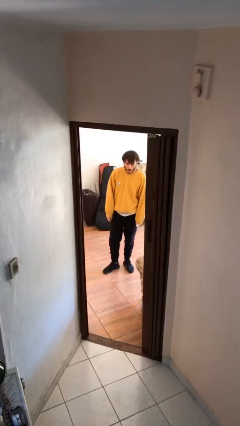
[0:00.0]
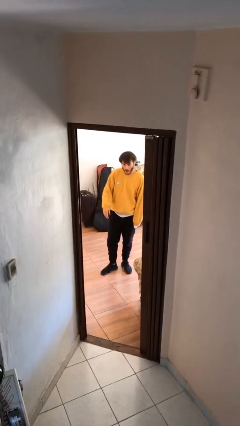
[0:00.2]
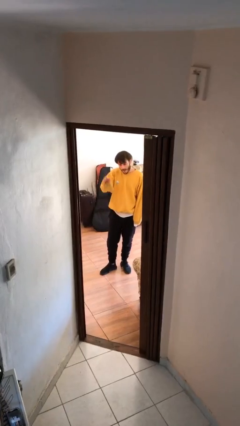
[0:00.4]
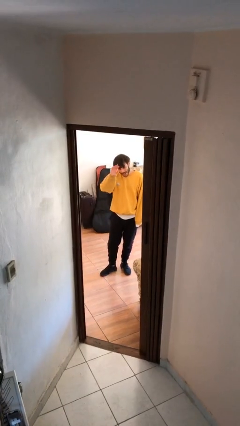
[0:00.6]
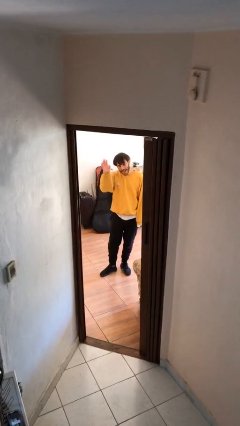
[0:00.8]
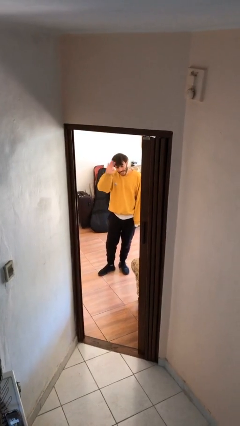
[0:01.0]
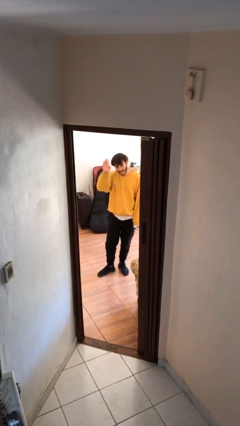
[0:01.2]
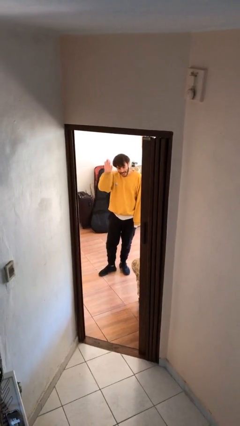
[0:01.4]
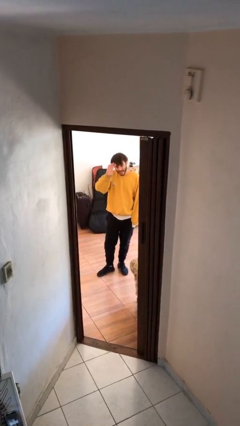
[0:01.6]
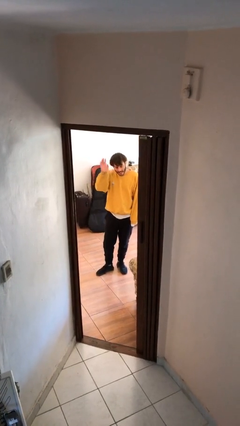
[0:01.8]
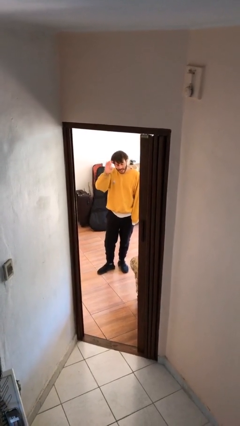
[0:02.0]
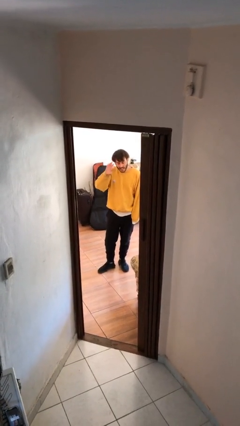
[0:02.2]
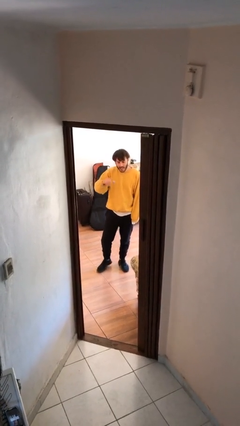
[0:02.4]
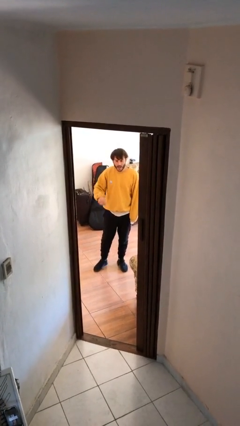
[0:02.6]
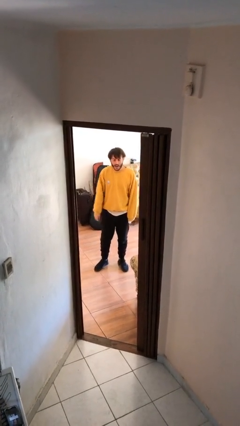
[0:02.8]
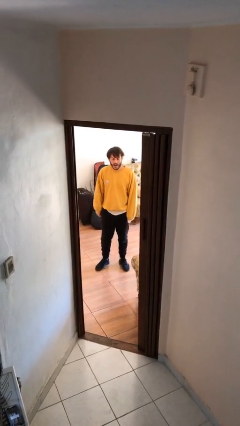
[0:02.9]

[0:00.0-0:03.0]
person waves at person

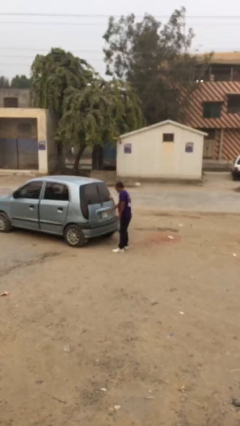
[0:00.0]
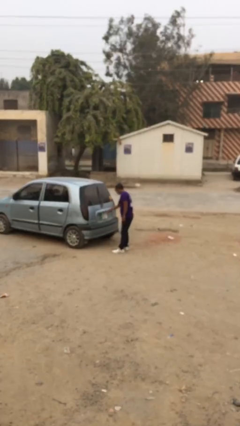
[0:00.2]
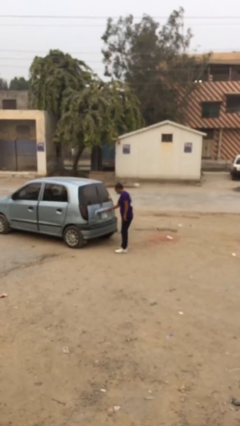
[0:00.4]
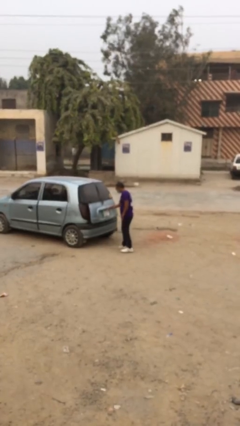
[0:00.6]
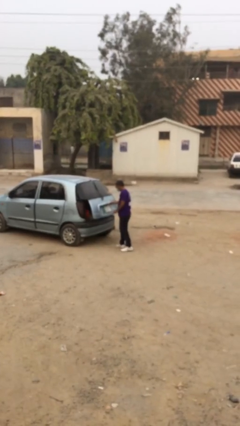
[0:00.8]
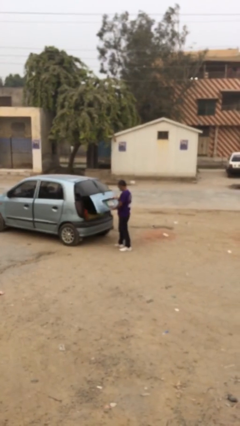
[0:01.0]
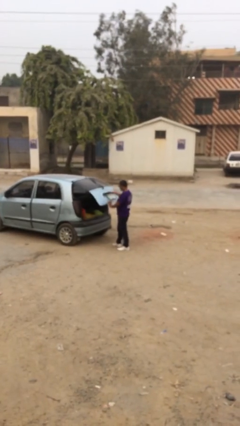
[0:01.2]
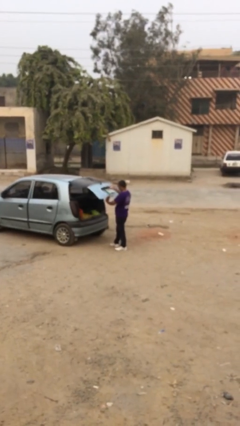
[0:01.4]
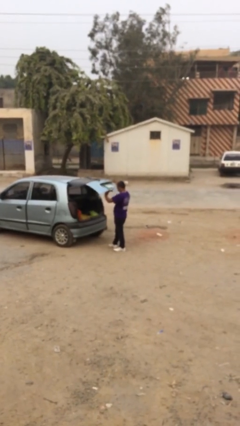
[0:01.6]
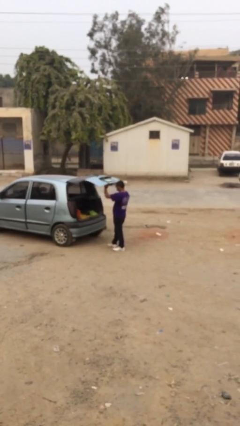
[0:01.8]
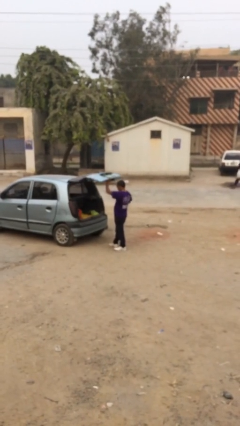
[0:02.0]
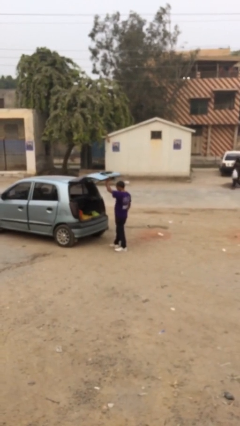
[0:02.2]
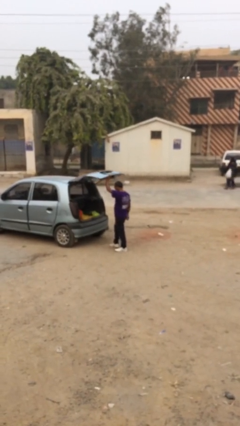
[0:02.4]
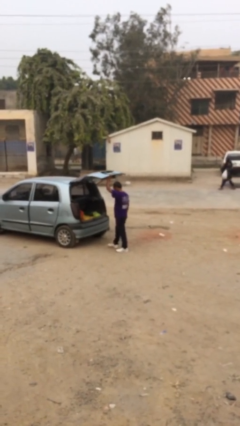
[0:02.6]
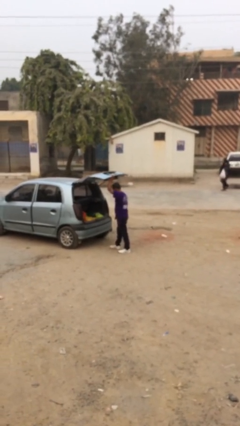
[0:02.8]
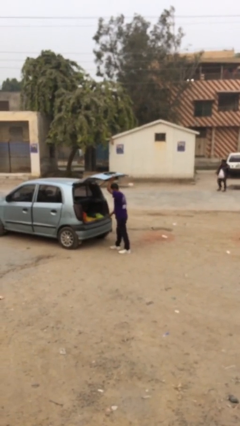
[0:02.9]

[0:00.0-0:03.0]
person opens car trunk

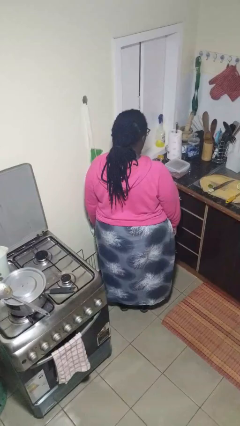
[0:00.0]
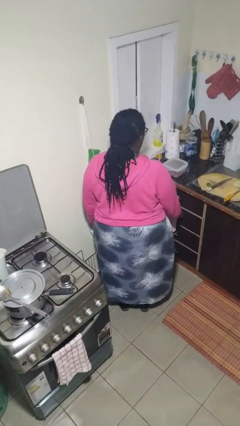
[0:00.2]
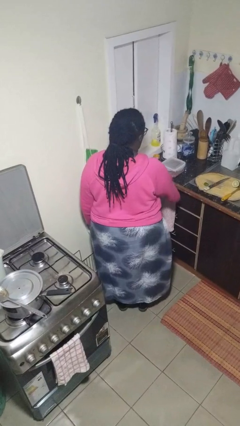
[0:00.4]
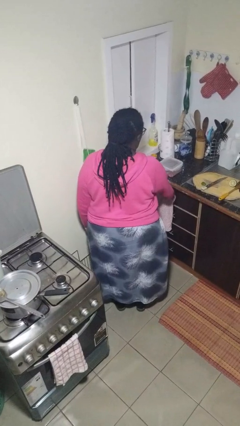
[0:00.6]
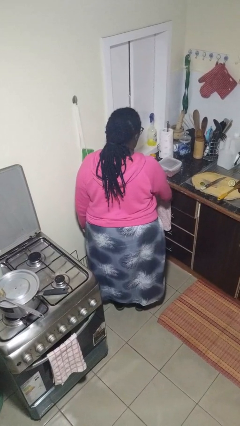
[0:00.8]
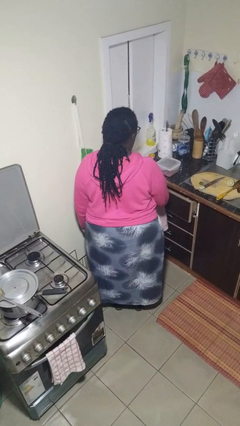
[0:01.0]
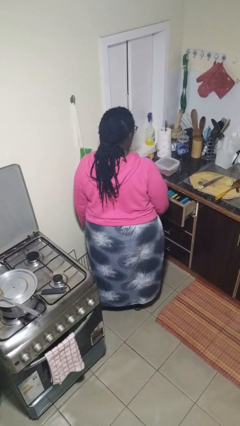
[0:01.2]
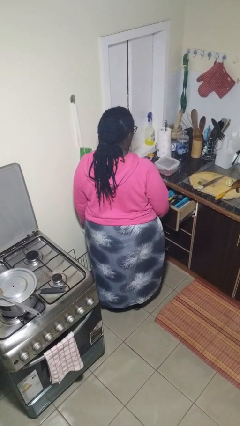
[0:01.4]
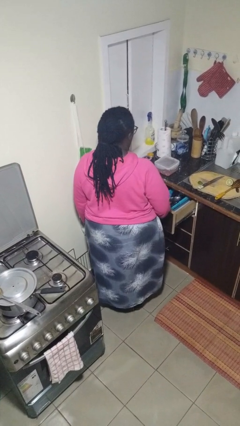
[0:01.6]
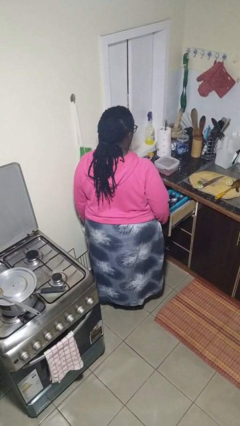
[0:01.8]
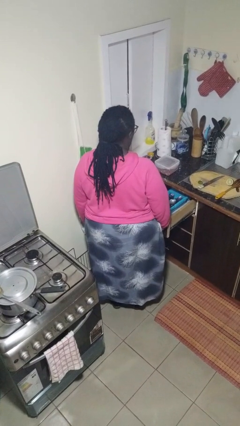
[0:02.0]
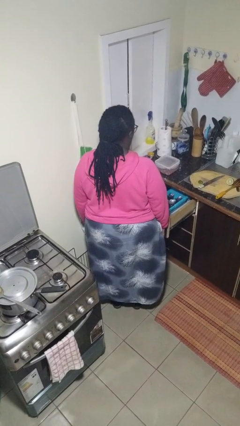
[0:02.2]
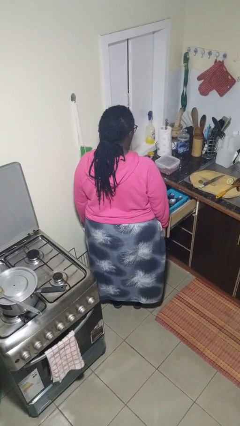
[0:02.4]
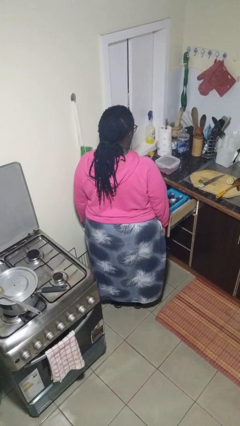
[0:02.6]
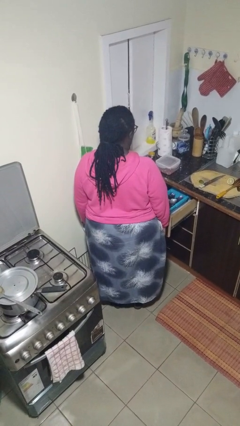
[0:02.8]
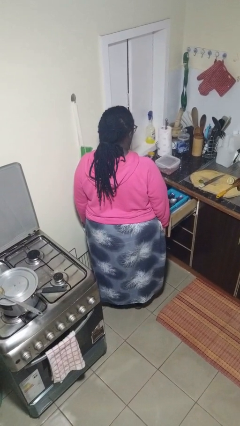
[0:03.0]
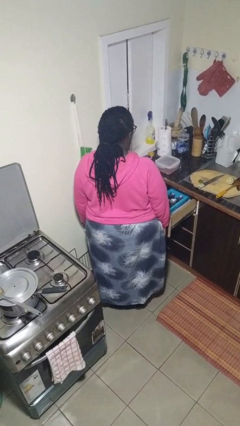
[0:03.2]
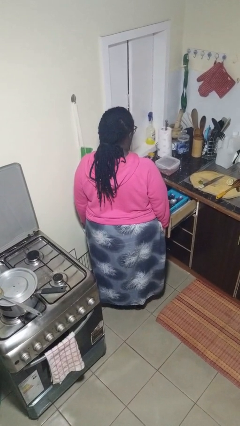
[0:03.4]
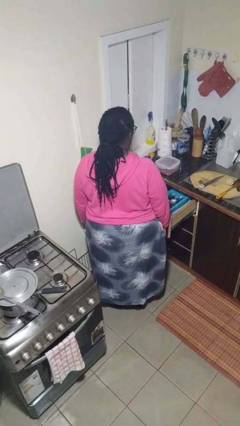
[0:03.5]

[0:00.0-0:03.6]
person opens kitchen drawer

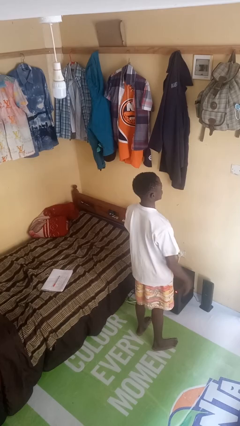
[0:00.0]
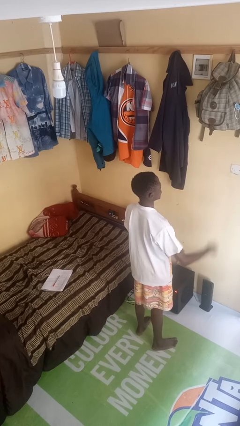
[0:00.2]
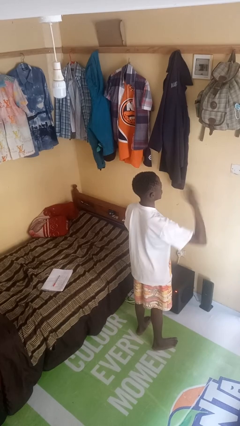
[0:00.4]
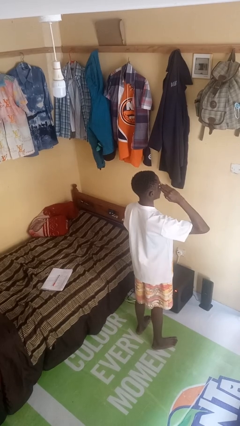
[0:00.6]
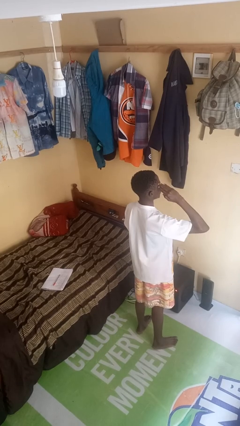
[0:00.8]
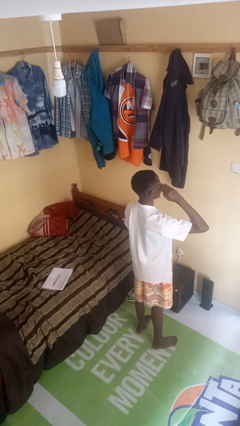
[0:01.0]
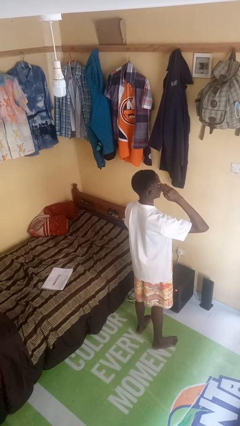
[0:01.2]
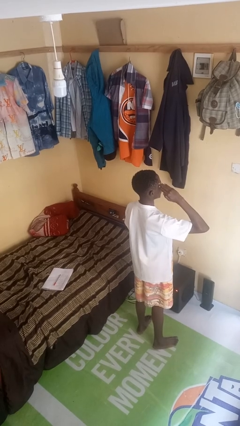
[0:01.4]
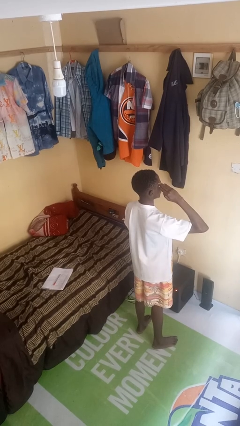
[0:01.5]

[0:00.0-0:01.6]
person salutes

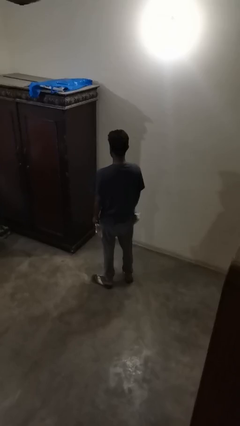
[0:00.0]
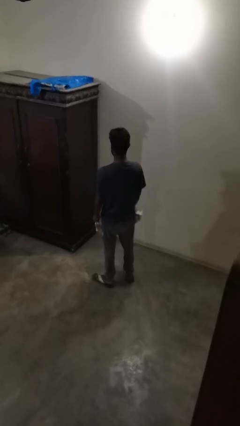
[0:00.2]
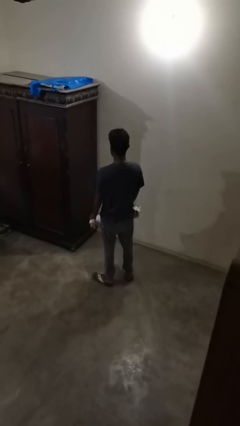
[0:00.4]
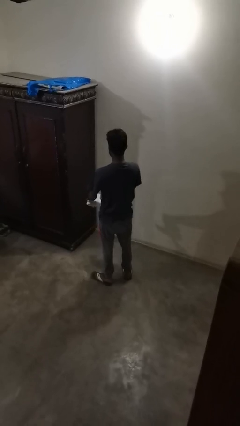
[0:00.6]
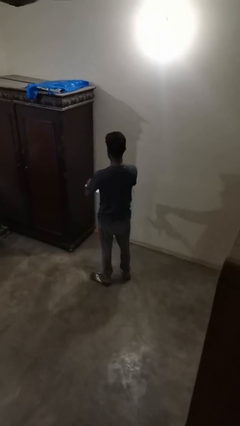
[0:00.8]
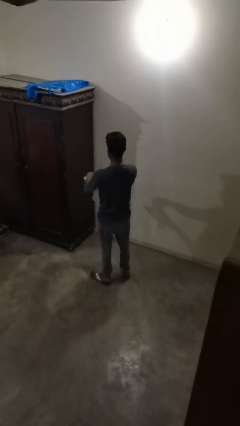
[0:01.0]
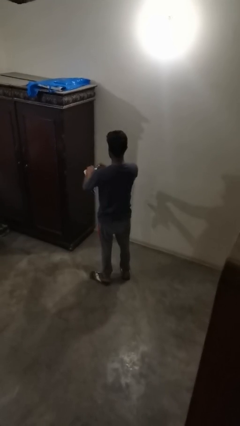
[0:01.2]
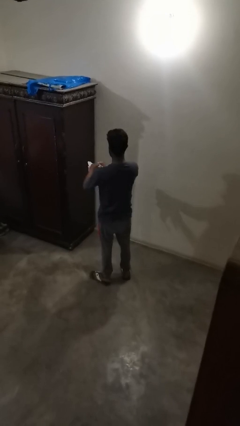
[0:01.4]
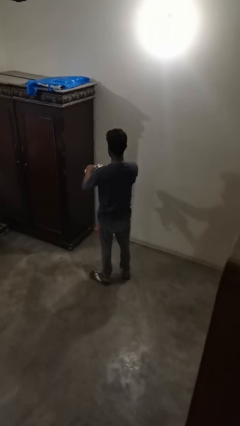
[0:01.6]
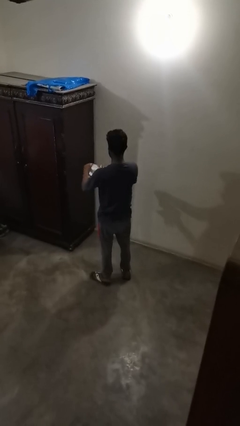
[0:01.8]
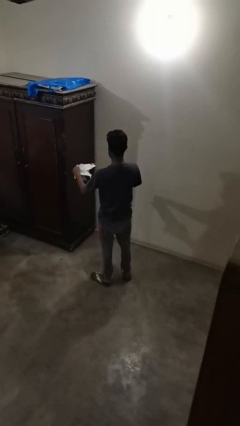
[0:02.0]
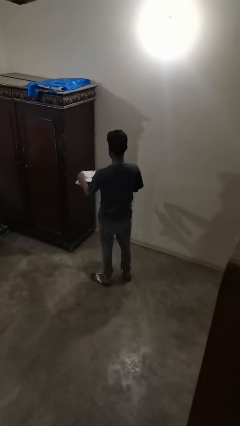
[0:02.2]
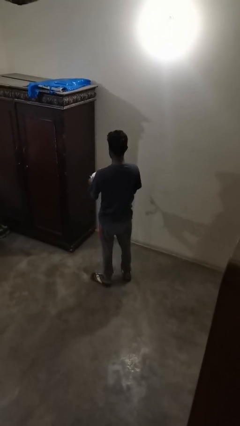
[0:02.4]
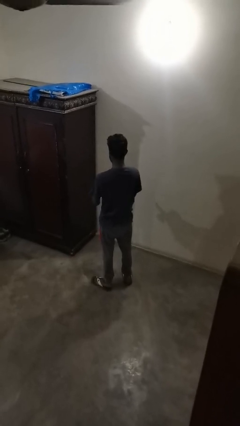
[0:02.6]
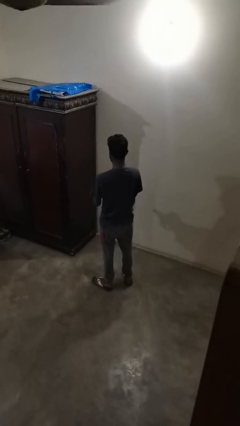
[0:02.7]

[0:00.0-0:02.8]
person tears paper

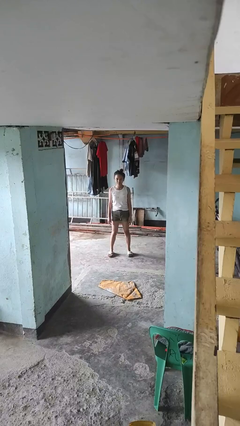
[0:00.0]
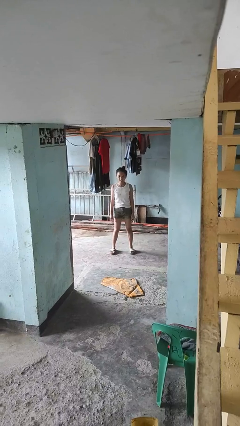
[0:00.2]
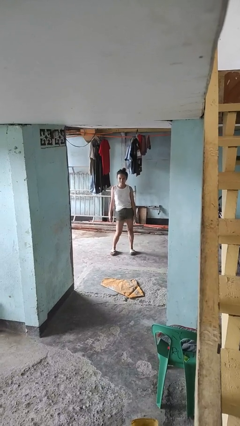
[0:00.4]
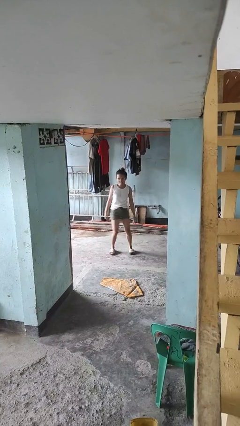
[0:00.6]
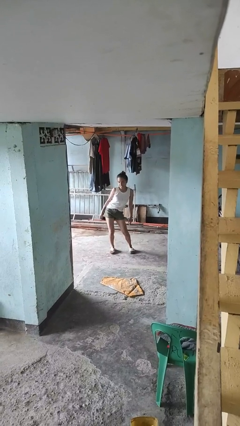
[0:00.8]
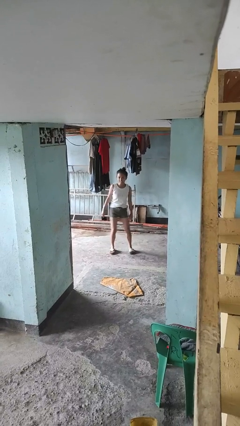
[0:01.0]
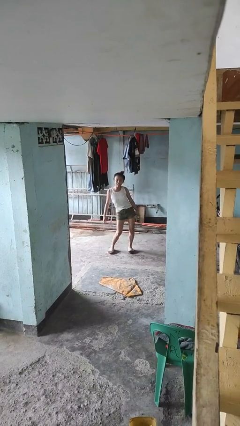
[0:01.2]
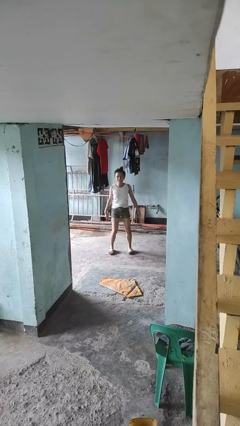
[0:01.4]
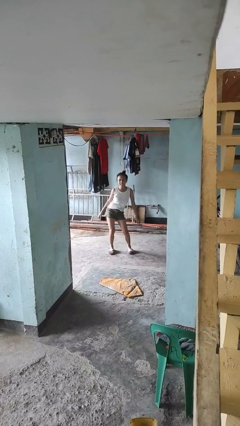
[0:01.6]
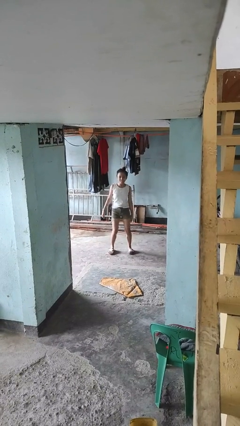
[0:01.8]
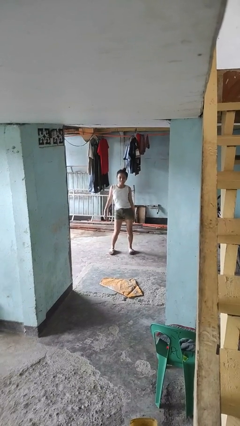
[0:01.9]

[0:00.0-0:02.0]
person wiggles hips

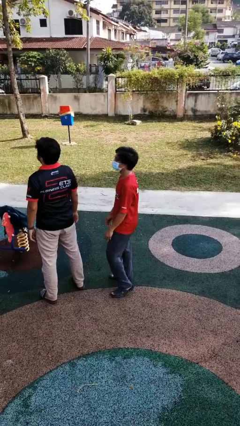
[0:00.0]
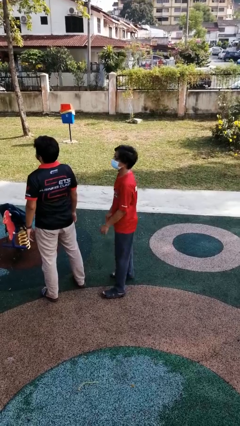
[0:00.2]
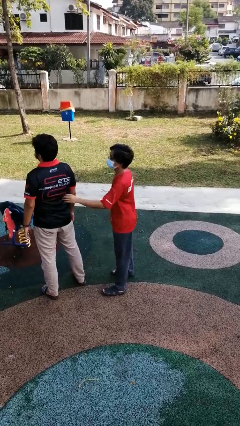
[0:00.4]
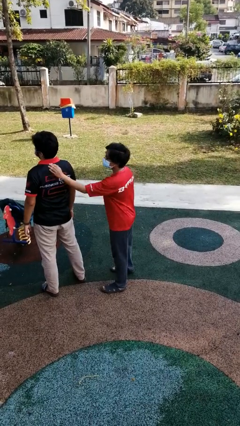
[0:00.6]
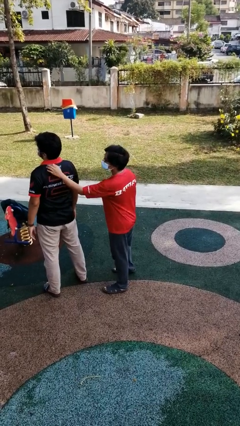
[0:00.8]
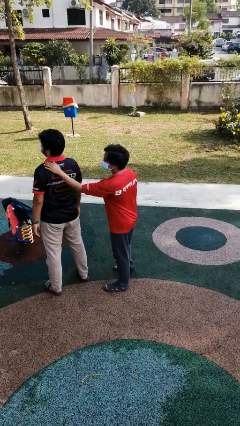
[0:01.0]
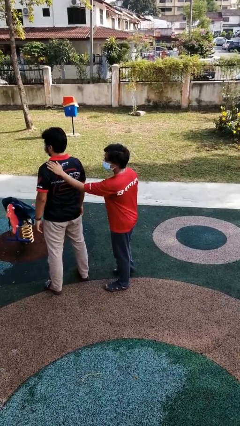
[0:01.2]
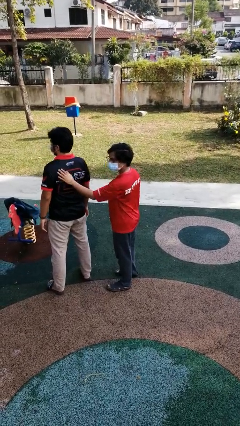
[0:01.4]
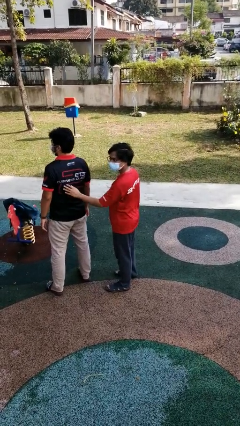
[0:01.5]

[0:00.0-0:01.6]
person touches back of person
